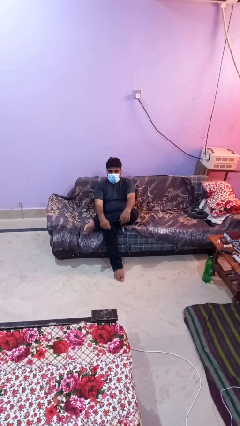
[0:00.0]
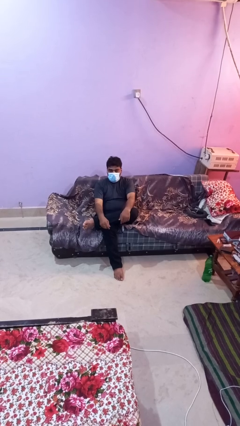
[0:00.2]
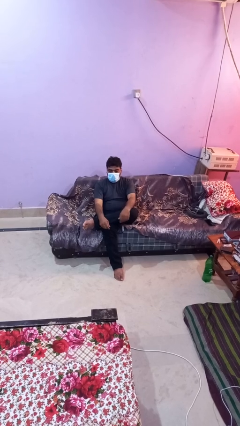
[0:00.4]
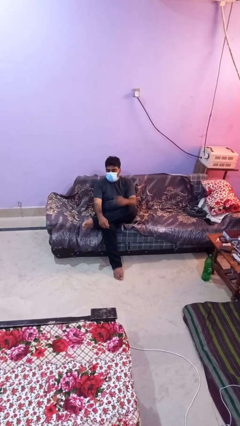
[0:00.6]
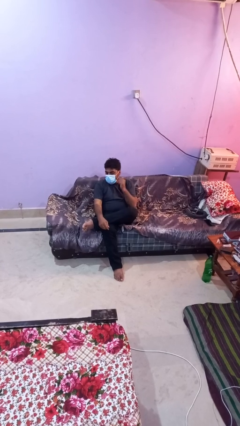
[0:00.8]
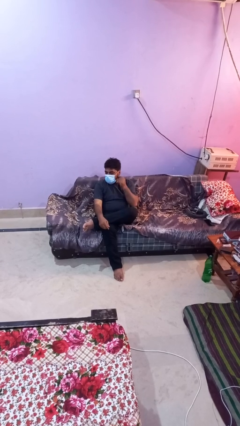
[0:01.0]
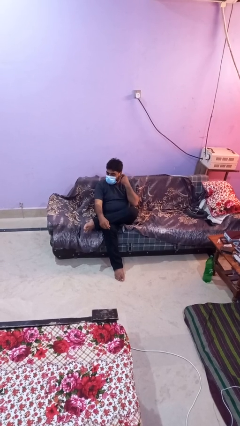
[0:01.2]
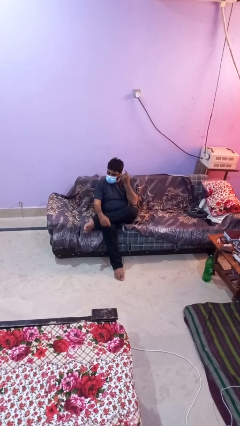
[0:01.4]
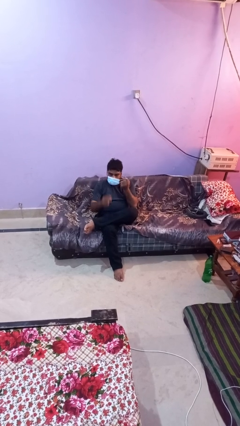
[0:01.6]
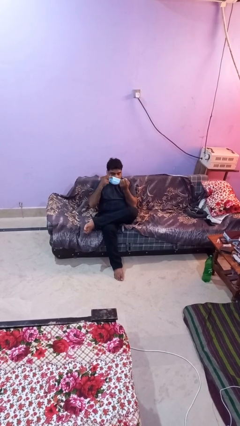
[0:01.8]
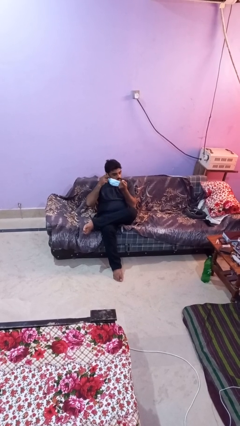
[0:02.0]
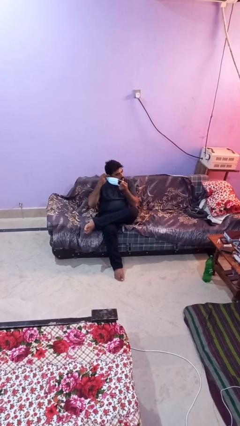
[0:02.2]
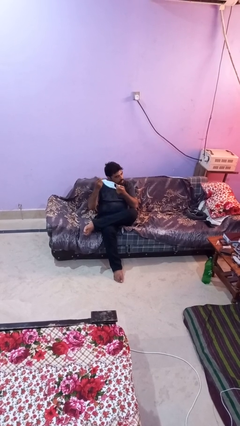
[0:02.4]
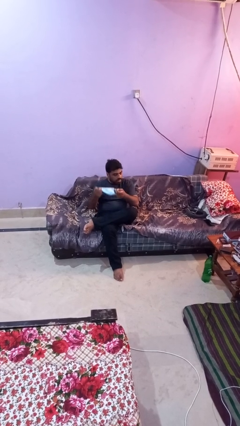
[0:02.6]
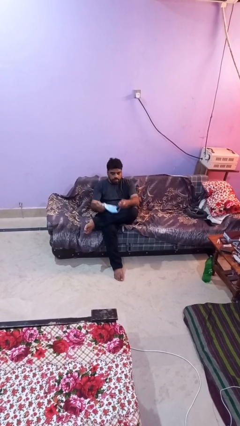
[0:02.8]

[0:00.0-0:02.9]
person takes off facemask

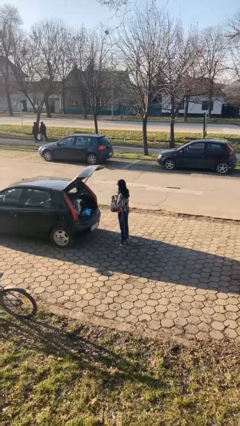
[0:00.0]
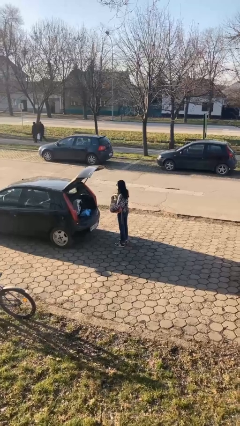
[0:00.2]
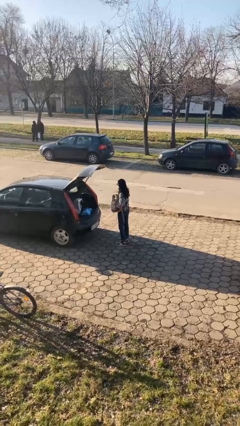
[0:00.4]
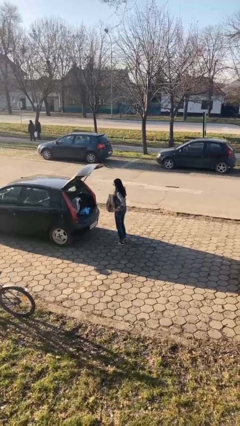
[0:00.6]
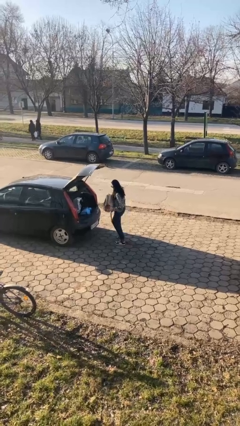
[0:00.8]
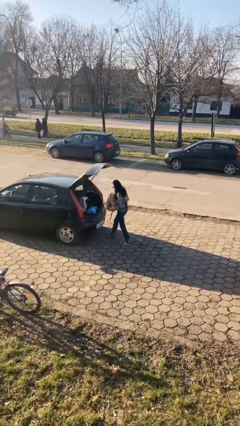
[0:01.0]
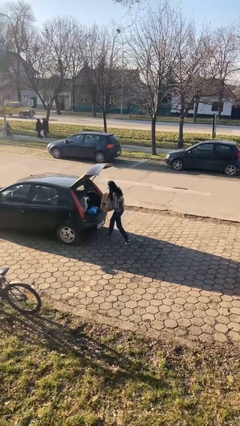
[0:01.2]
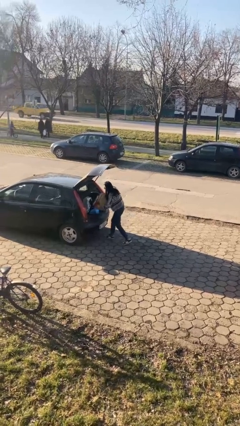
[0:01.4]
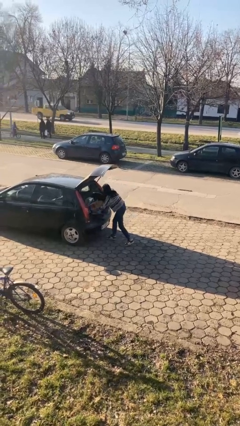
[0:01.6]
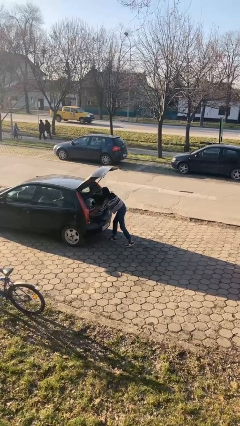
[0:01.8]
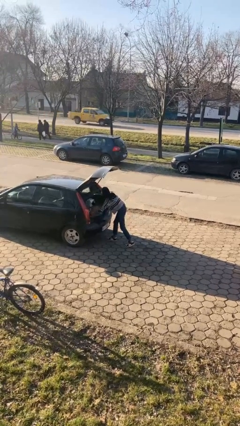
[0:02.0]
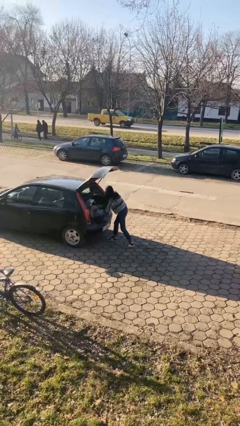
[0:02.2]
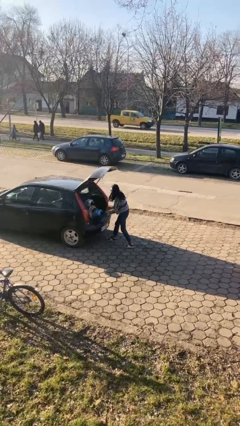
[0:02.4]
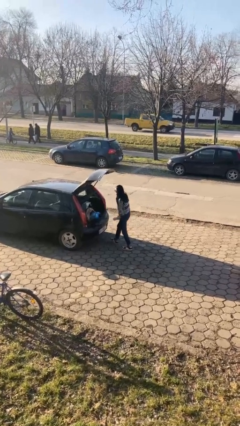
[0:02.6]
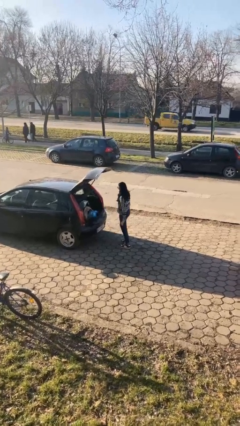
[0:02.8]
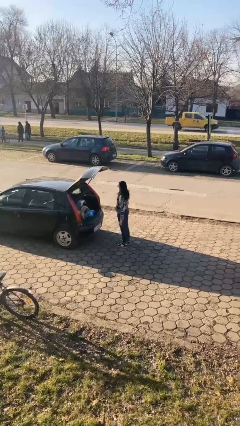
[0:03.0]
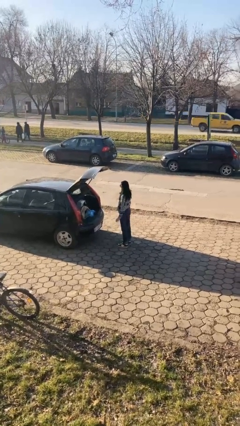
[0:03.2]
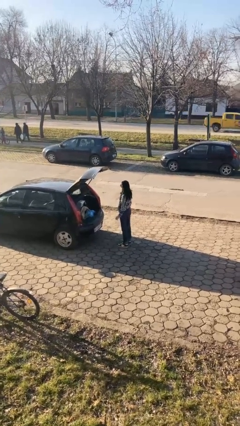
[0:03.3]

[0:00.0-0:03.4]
person loads car

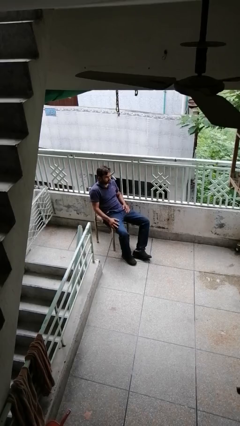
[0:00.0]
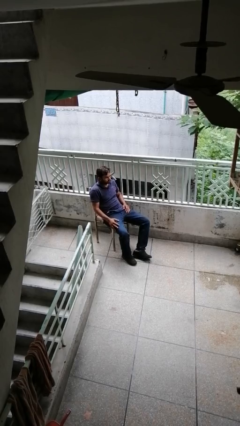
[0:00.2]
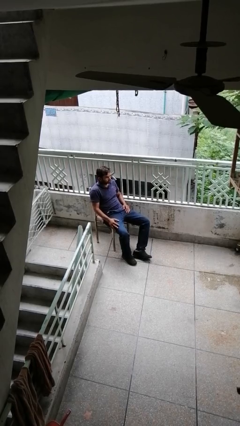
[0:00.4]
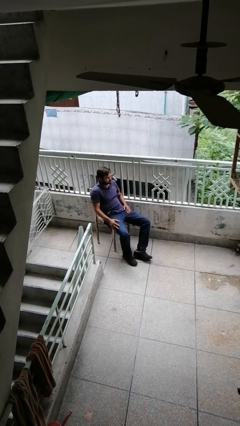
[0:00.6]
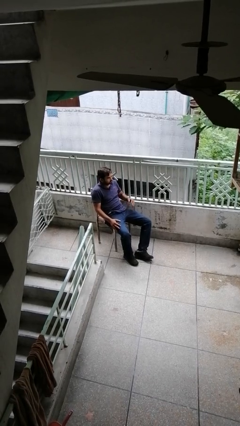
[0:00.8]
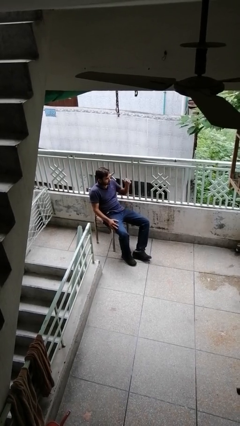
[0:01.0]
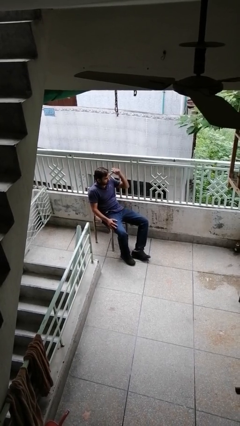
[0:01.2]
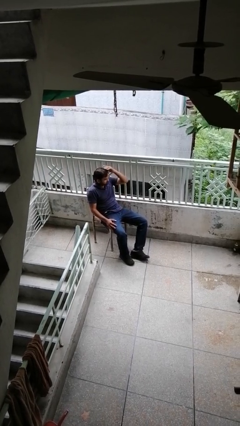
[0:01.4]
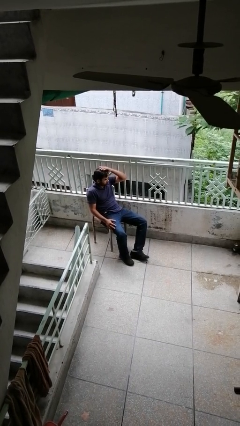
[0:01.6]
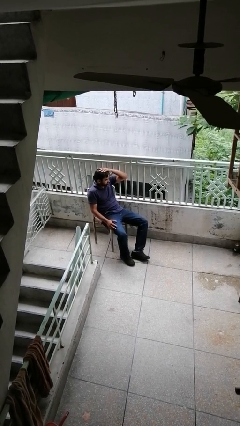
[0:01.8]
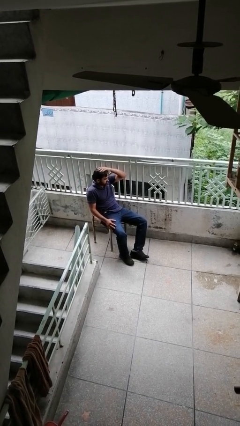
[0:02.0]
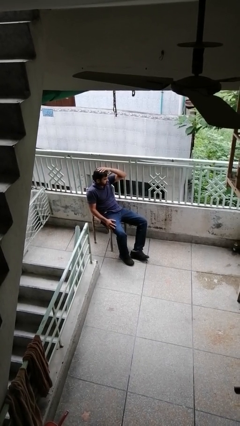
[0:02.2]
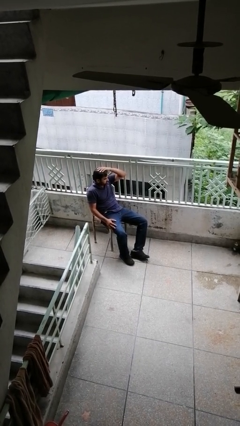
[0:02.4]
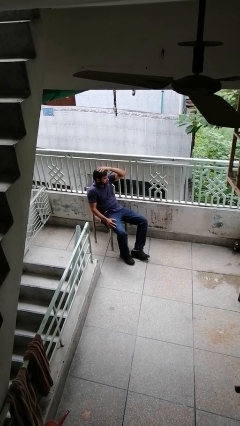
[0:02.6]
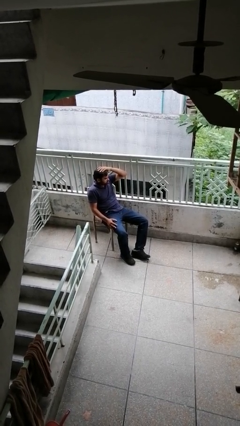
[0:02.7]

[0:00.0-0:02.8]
person pats head

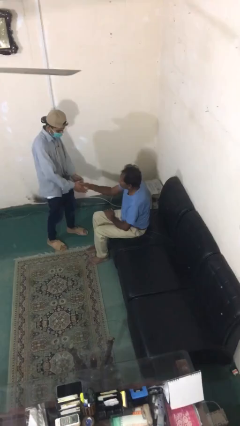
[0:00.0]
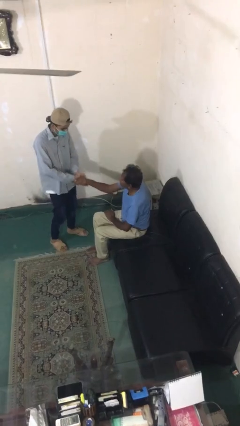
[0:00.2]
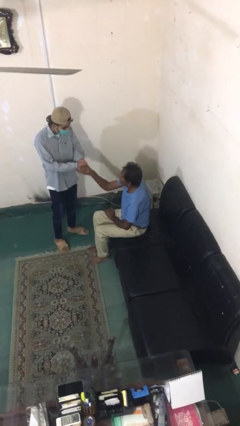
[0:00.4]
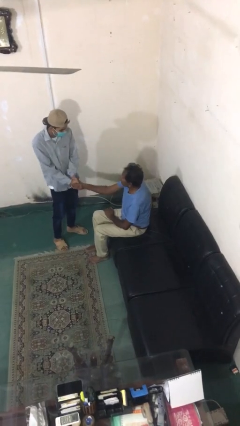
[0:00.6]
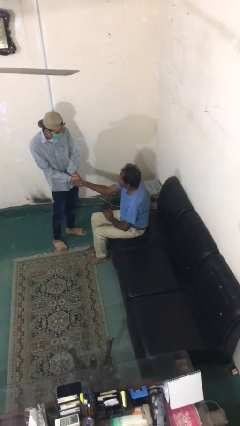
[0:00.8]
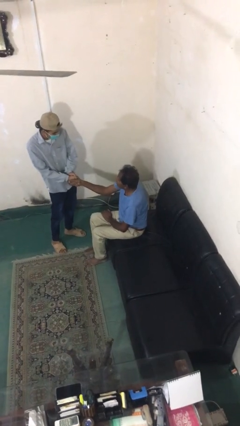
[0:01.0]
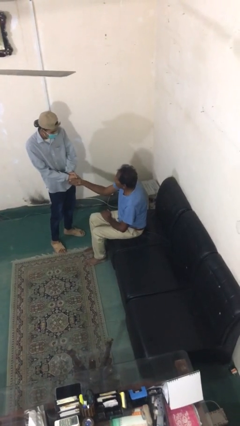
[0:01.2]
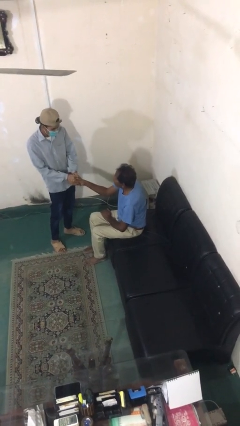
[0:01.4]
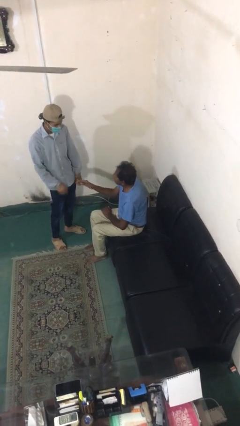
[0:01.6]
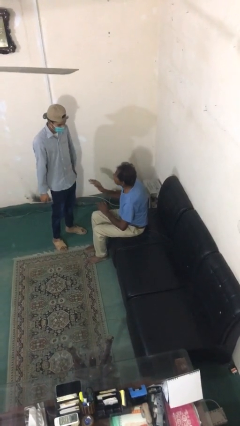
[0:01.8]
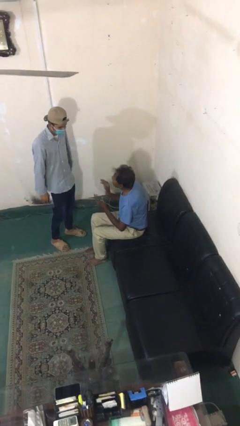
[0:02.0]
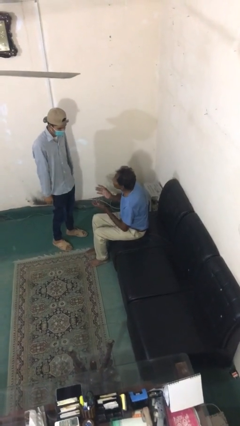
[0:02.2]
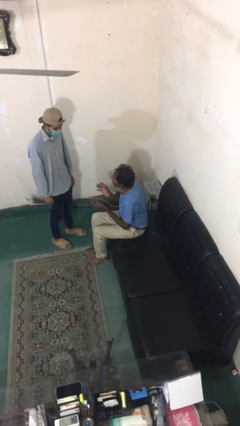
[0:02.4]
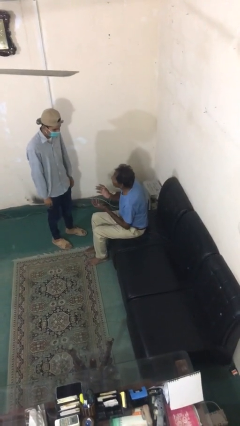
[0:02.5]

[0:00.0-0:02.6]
person shakes hand

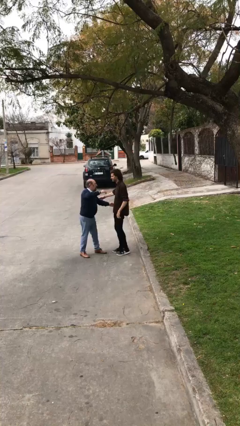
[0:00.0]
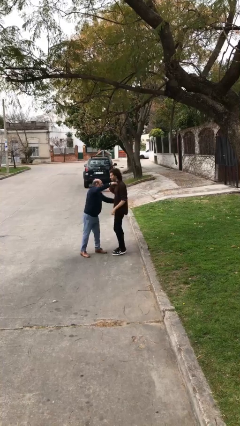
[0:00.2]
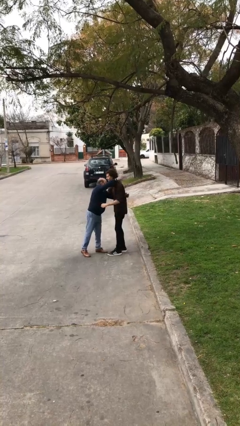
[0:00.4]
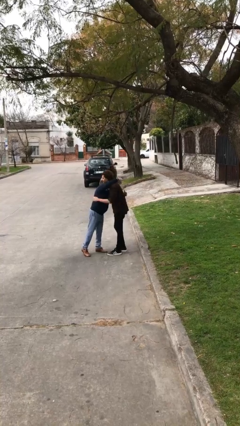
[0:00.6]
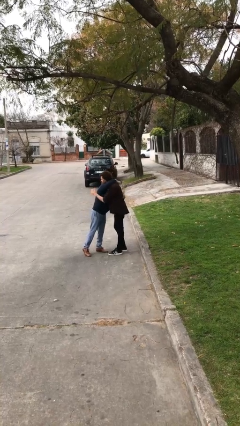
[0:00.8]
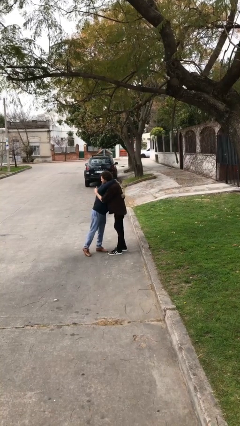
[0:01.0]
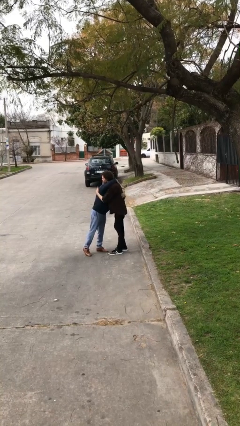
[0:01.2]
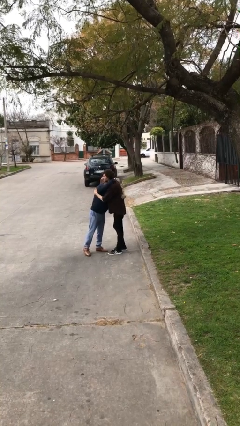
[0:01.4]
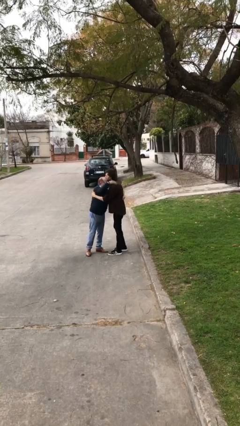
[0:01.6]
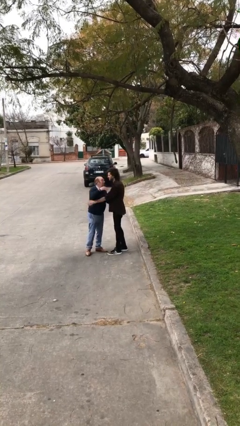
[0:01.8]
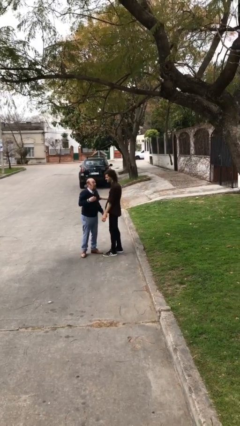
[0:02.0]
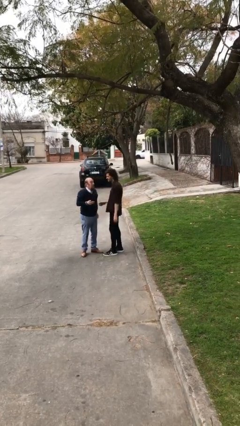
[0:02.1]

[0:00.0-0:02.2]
person embraces person

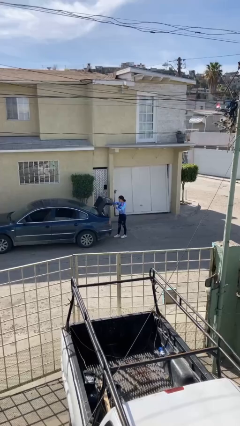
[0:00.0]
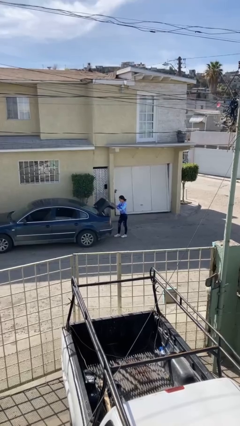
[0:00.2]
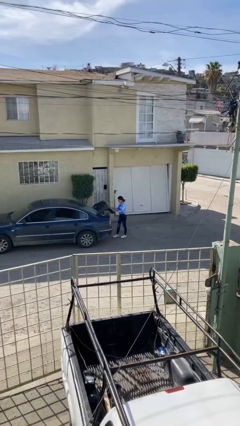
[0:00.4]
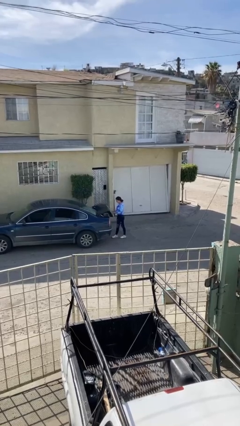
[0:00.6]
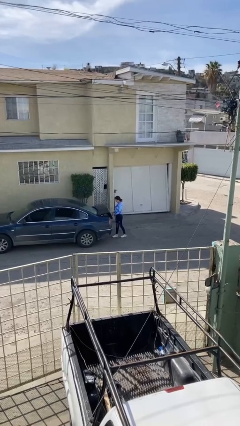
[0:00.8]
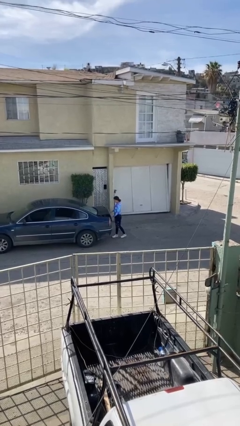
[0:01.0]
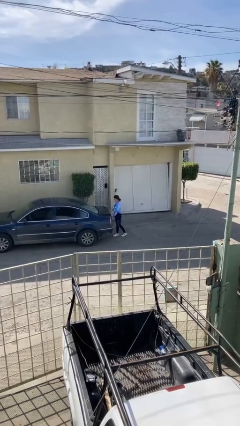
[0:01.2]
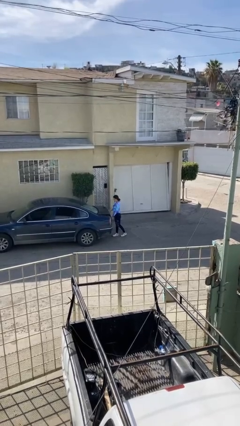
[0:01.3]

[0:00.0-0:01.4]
person closes car trunk

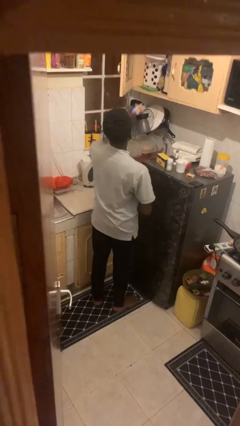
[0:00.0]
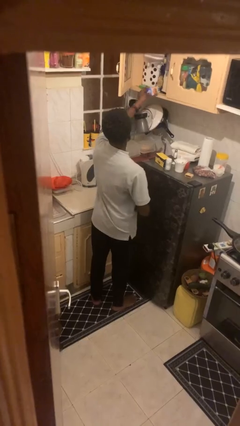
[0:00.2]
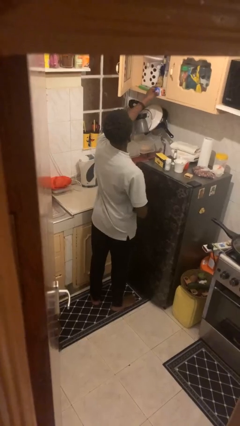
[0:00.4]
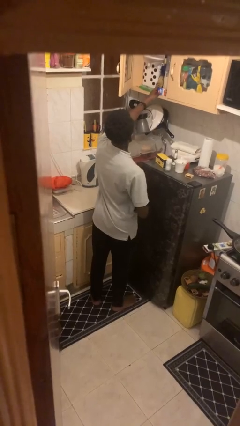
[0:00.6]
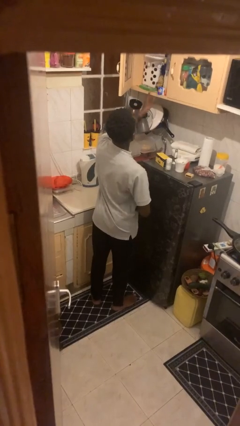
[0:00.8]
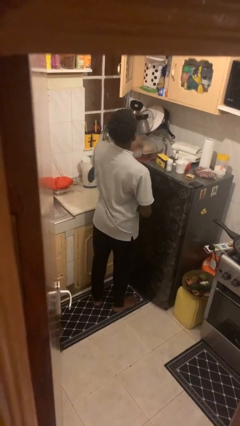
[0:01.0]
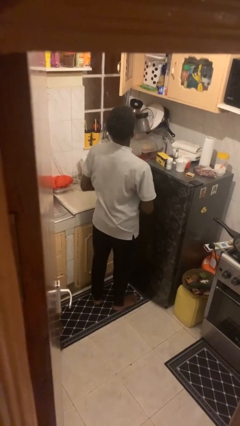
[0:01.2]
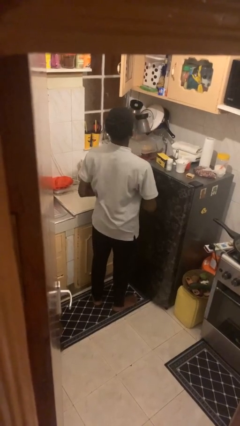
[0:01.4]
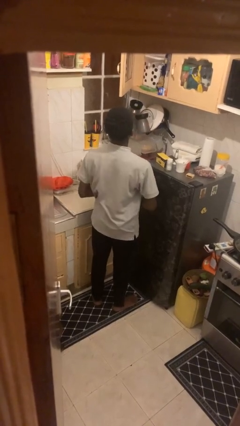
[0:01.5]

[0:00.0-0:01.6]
person puts down object into cabinet
